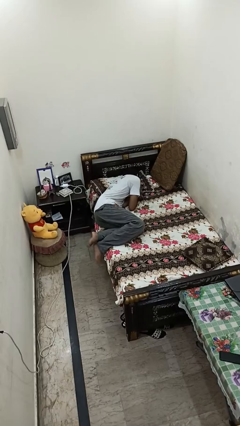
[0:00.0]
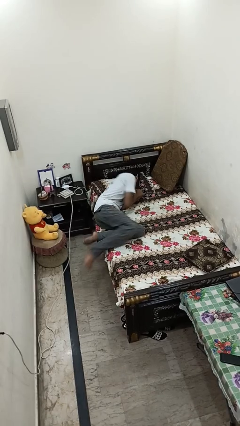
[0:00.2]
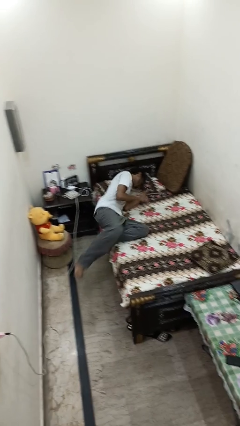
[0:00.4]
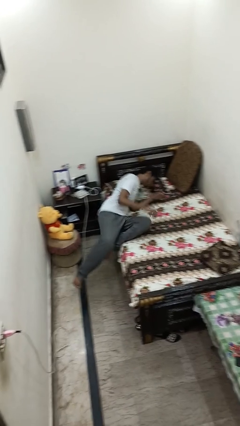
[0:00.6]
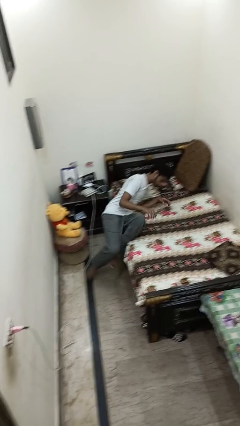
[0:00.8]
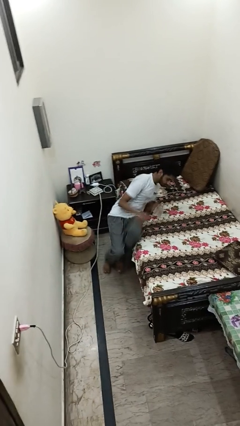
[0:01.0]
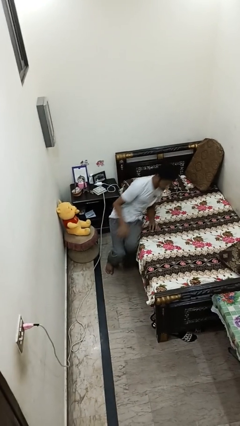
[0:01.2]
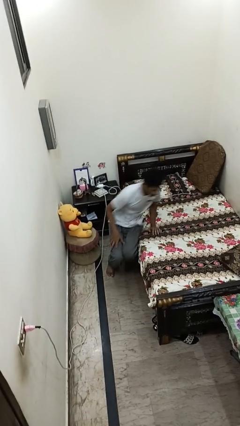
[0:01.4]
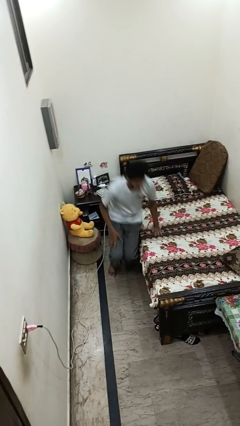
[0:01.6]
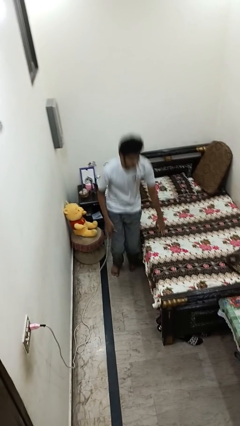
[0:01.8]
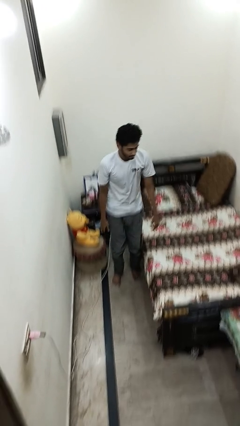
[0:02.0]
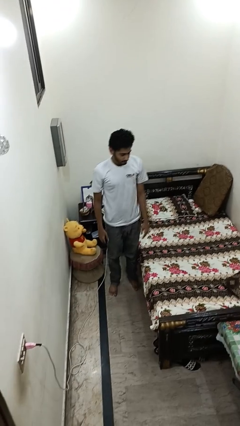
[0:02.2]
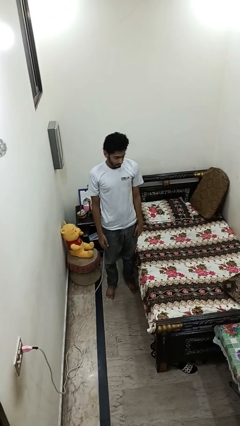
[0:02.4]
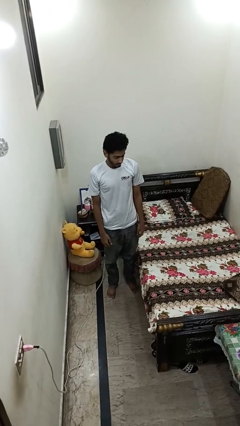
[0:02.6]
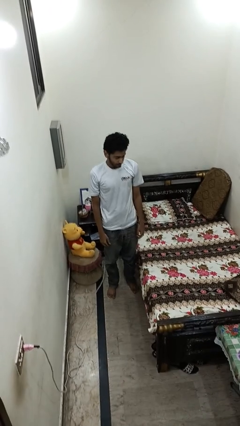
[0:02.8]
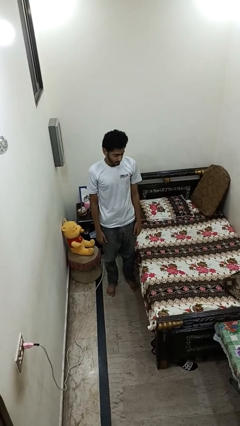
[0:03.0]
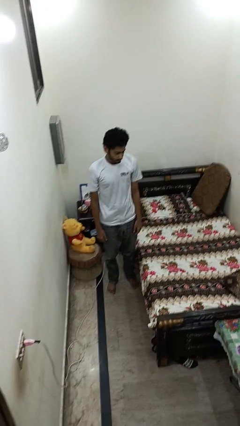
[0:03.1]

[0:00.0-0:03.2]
person stands up

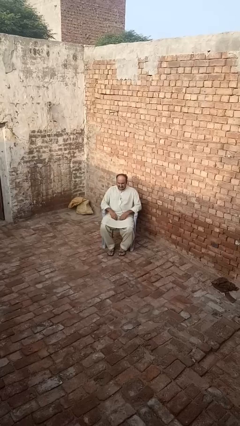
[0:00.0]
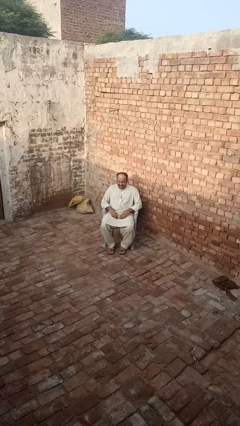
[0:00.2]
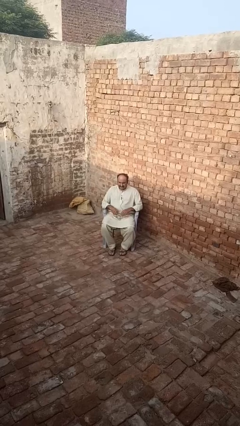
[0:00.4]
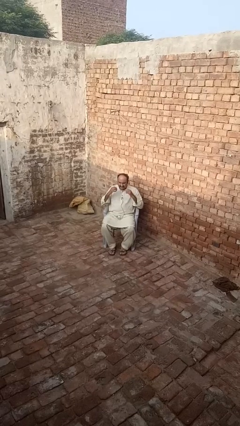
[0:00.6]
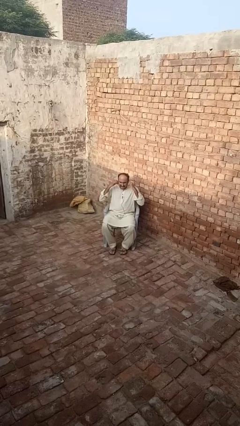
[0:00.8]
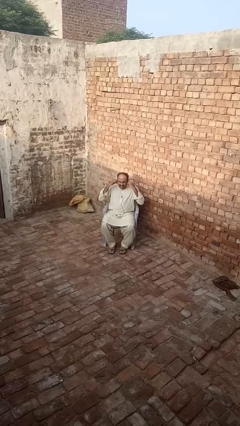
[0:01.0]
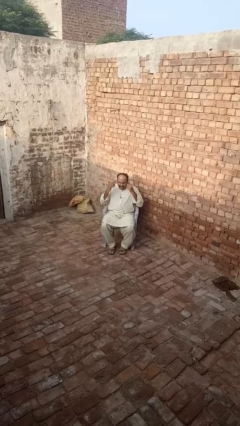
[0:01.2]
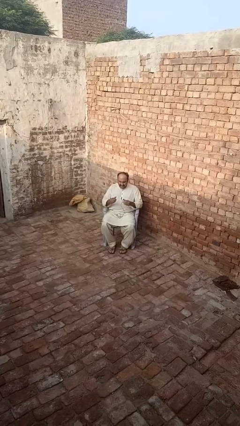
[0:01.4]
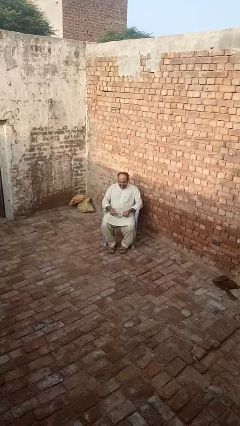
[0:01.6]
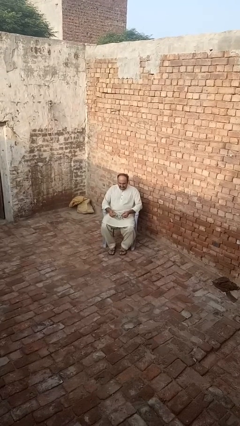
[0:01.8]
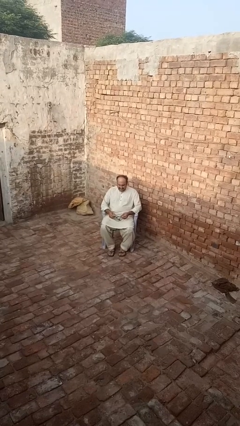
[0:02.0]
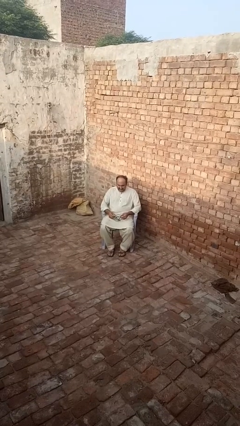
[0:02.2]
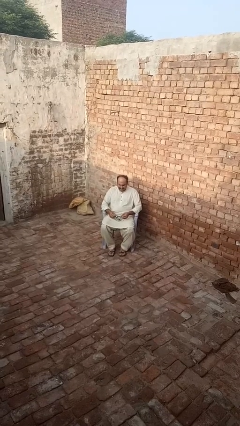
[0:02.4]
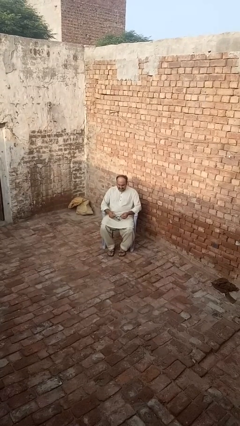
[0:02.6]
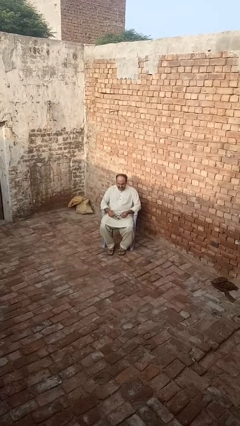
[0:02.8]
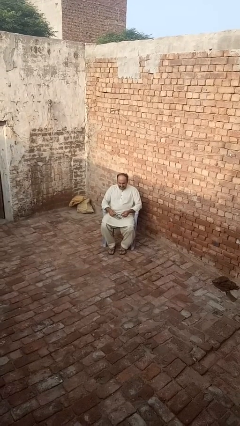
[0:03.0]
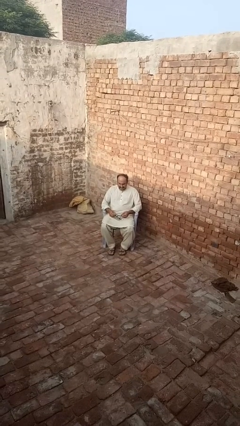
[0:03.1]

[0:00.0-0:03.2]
person takes off headphones

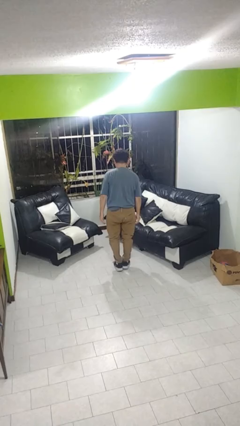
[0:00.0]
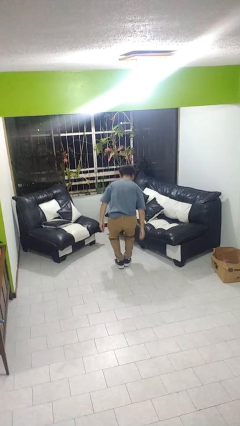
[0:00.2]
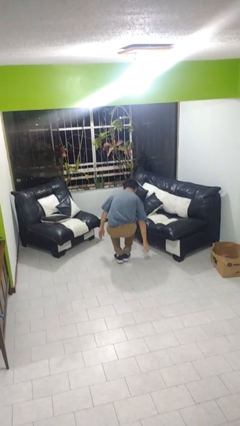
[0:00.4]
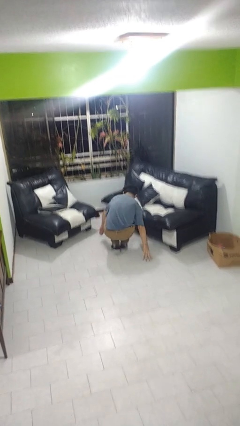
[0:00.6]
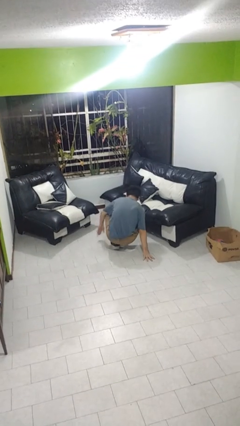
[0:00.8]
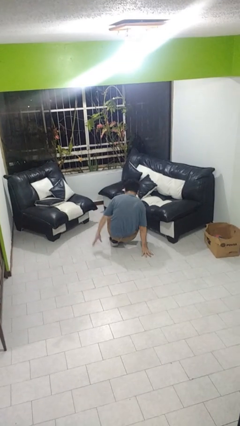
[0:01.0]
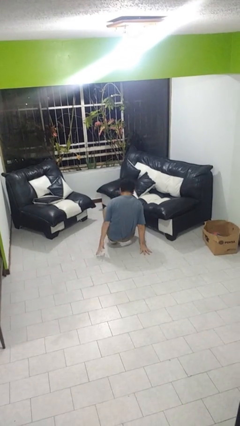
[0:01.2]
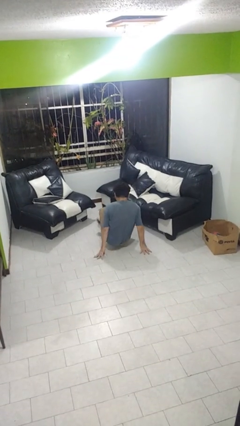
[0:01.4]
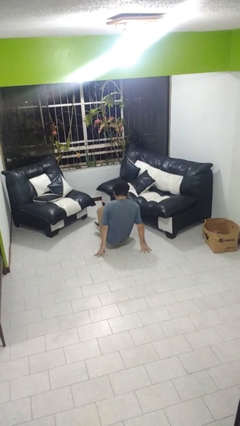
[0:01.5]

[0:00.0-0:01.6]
person sits crisscross

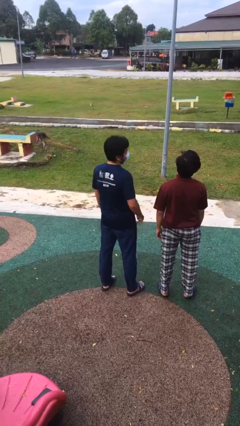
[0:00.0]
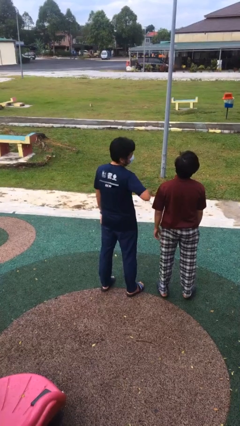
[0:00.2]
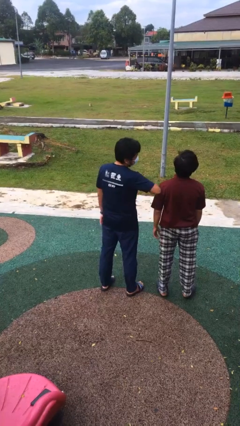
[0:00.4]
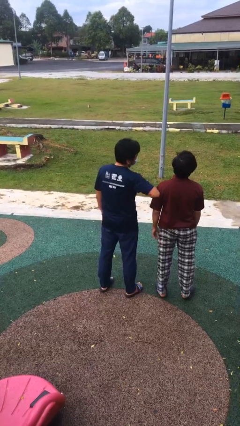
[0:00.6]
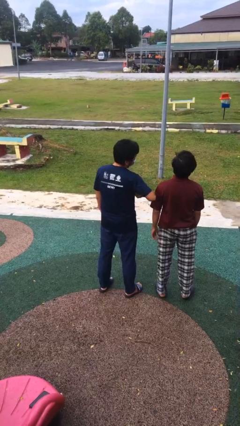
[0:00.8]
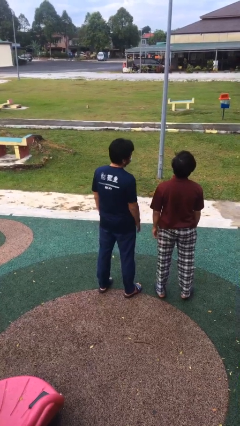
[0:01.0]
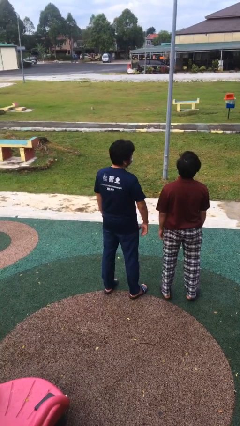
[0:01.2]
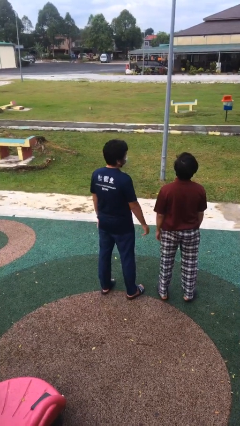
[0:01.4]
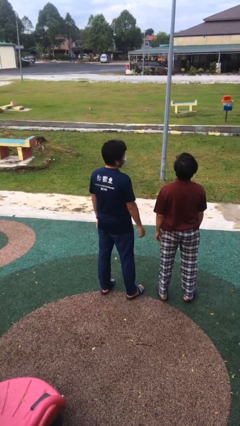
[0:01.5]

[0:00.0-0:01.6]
person nudges person with elbow

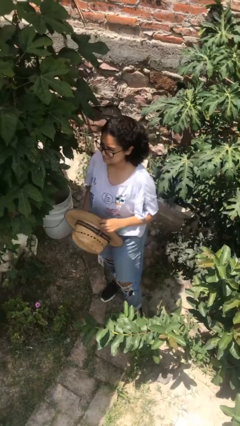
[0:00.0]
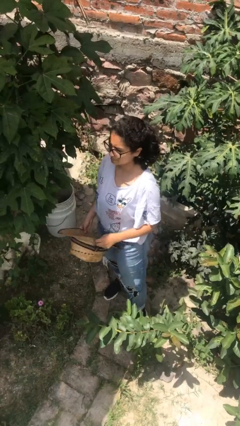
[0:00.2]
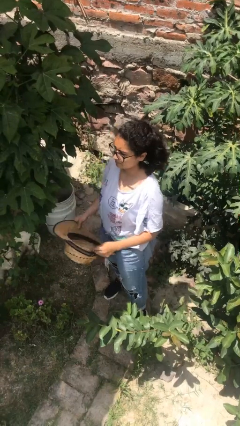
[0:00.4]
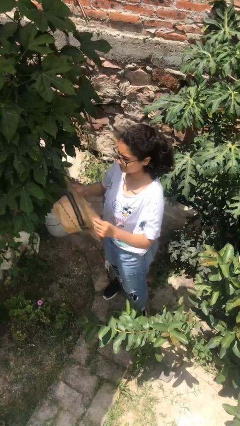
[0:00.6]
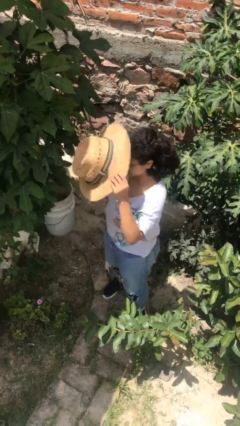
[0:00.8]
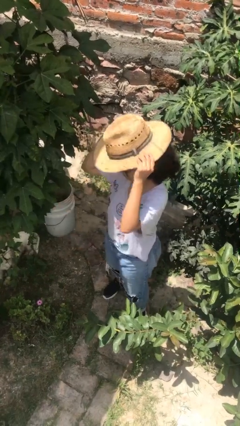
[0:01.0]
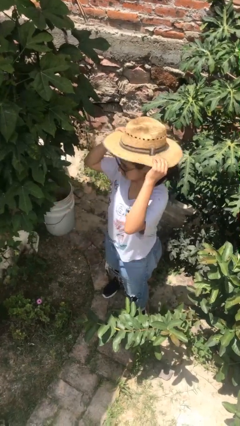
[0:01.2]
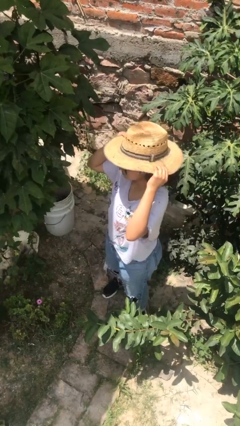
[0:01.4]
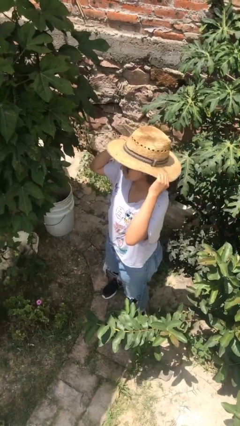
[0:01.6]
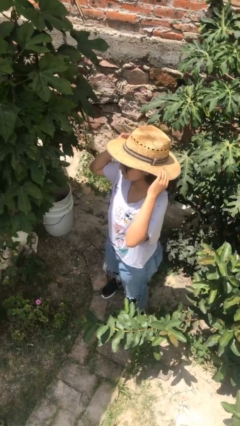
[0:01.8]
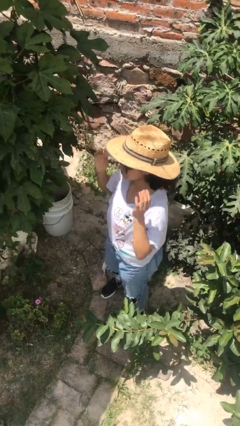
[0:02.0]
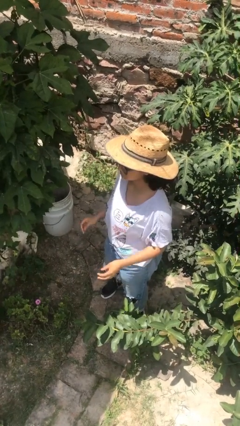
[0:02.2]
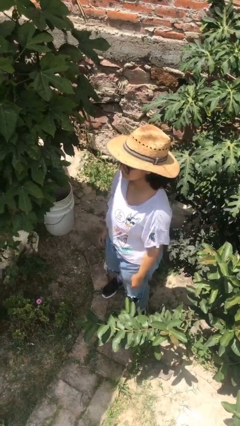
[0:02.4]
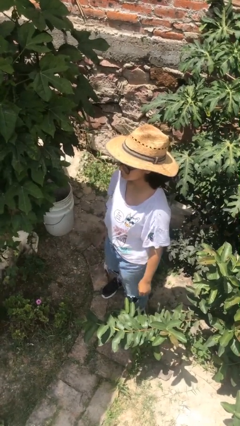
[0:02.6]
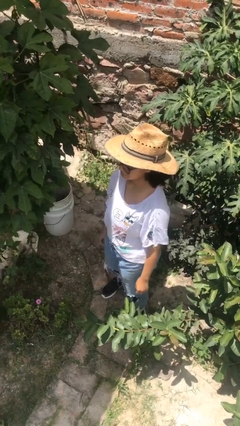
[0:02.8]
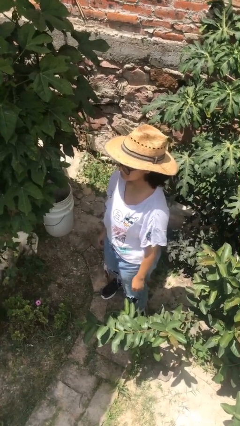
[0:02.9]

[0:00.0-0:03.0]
person puts on hat

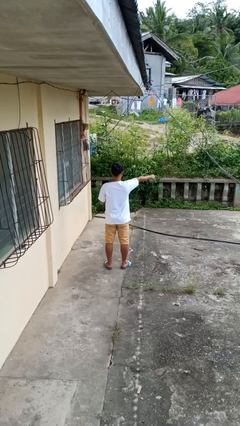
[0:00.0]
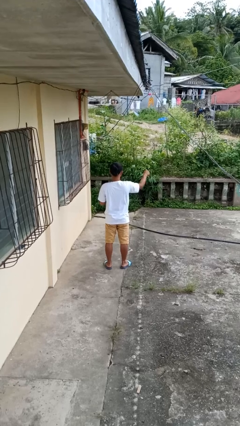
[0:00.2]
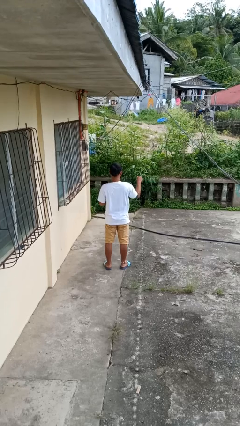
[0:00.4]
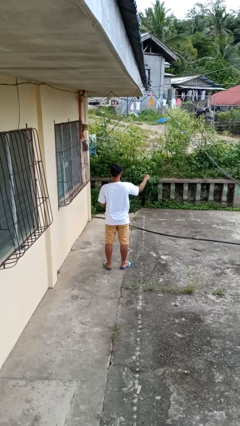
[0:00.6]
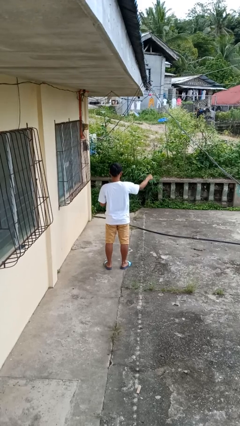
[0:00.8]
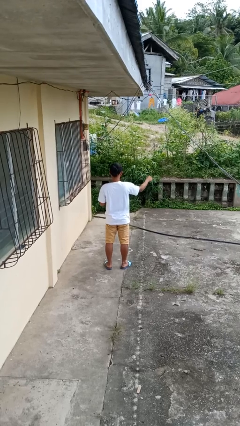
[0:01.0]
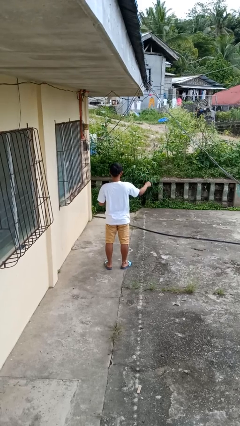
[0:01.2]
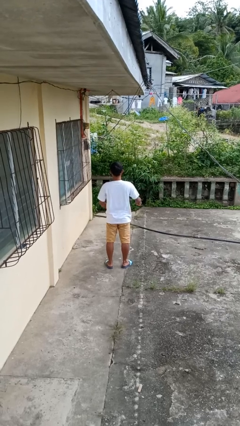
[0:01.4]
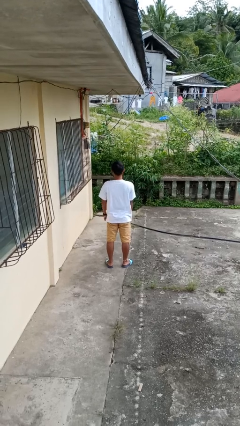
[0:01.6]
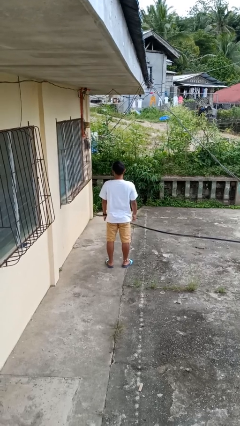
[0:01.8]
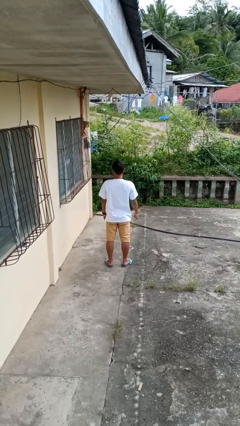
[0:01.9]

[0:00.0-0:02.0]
person punches

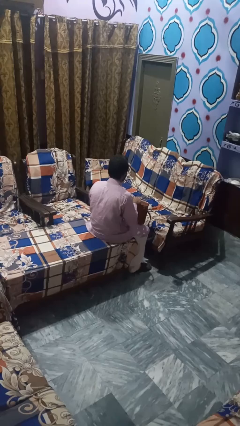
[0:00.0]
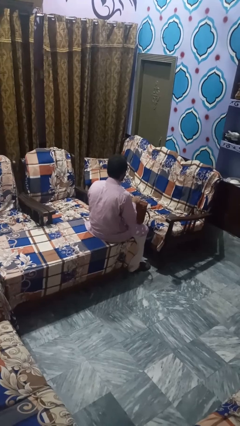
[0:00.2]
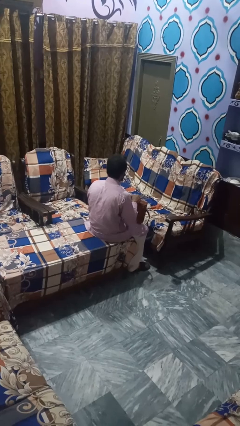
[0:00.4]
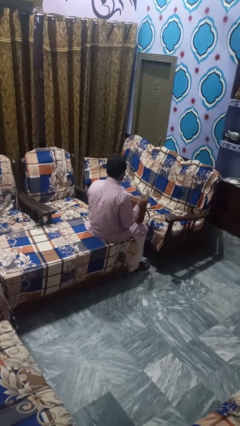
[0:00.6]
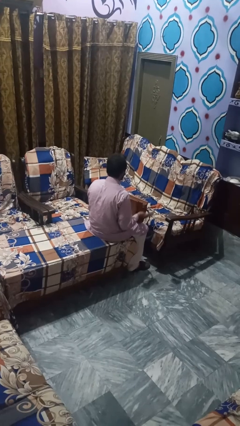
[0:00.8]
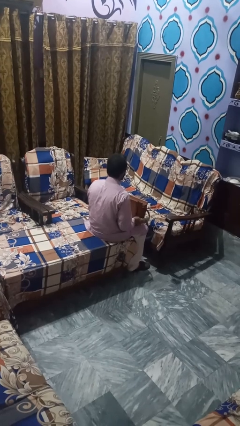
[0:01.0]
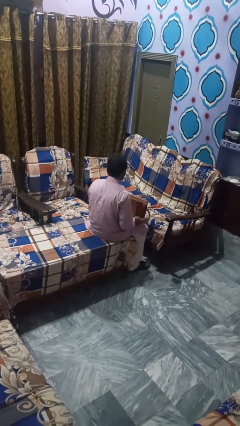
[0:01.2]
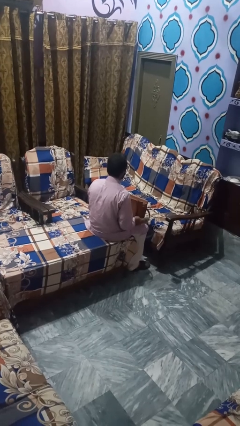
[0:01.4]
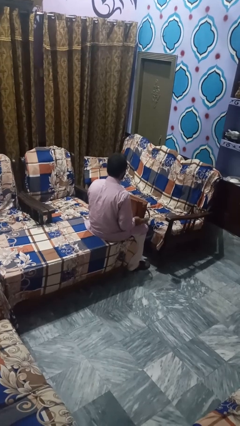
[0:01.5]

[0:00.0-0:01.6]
person puts object into bag

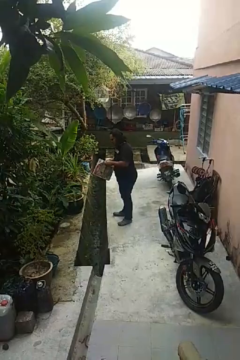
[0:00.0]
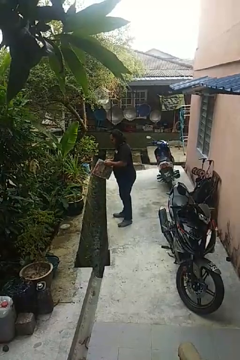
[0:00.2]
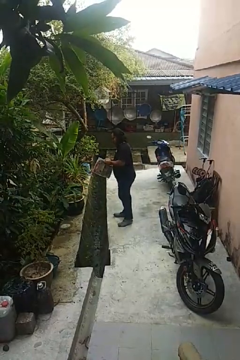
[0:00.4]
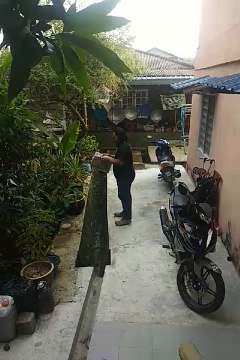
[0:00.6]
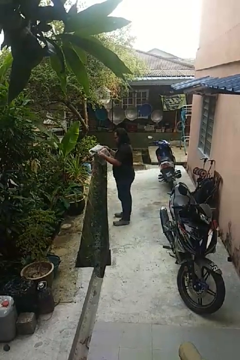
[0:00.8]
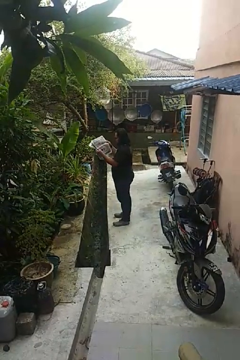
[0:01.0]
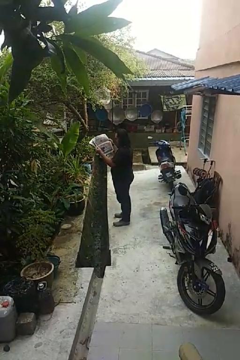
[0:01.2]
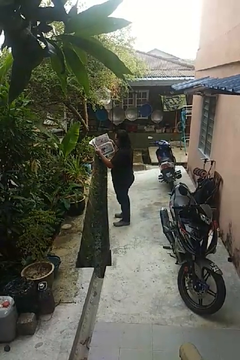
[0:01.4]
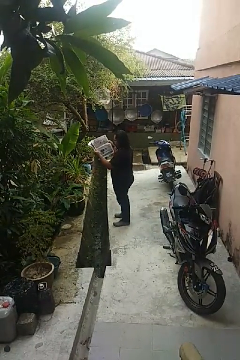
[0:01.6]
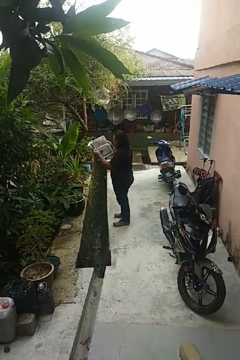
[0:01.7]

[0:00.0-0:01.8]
person reads newspaper
